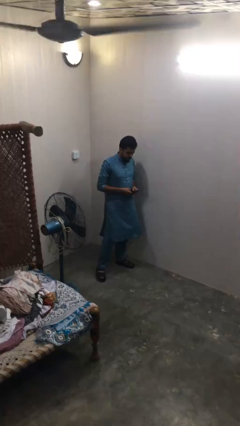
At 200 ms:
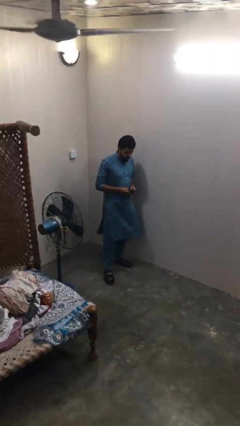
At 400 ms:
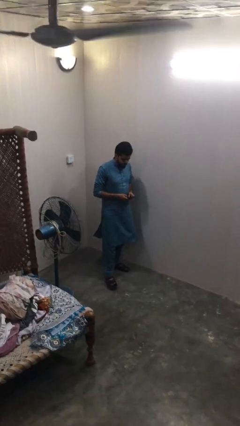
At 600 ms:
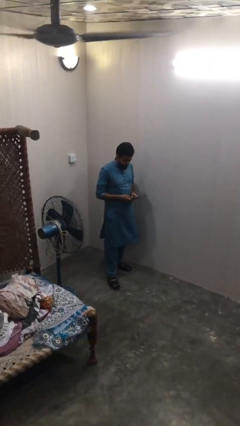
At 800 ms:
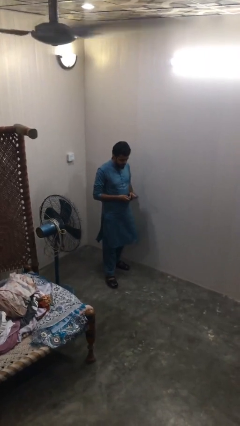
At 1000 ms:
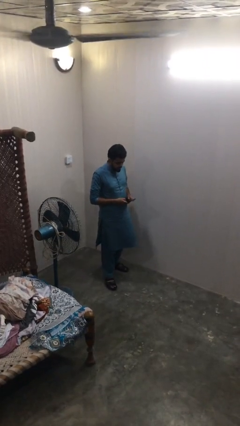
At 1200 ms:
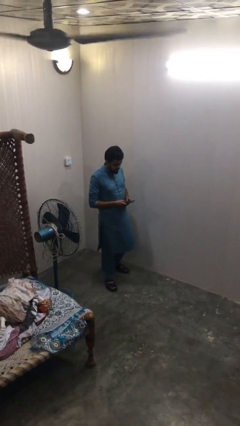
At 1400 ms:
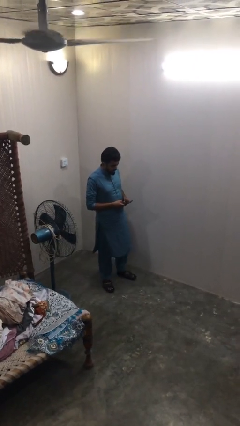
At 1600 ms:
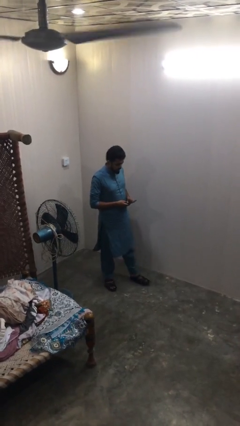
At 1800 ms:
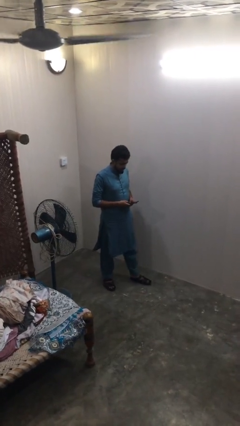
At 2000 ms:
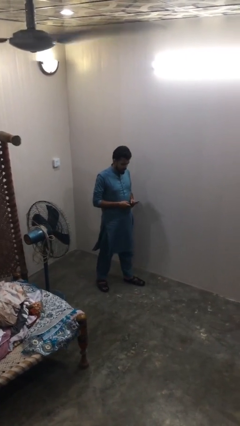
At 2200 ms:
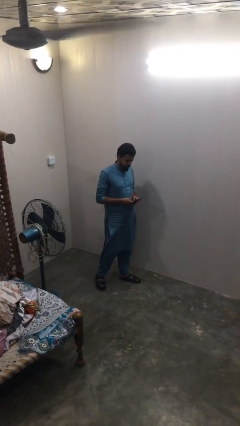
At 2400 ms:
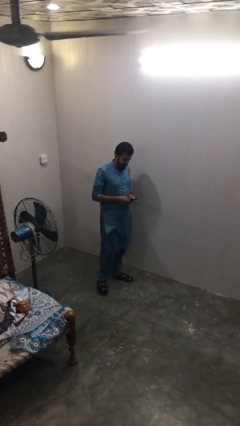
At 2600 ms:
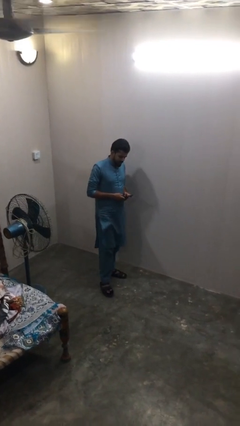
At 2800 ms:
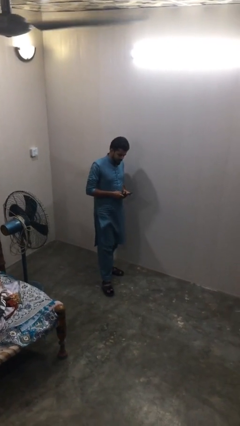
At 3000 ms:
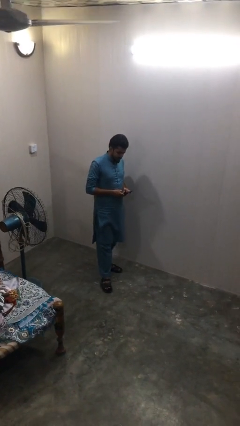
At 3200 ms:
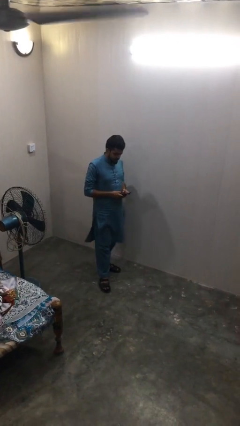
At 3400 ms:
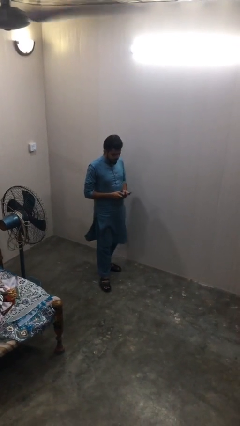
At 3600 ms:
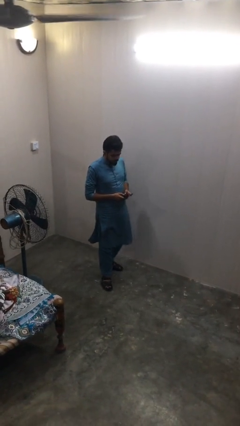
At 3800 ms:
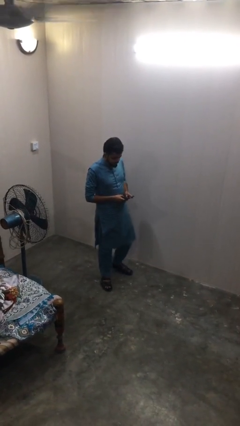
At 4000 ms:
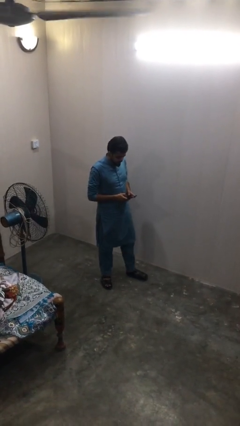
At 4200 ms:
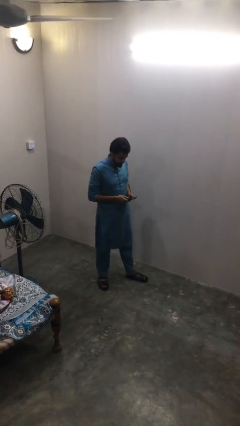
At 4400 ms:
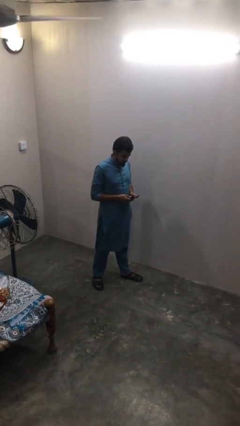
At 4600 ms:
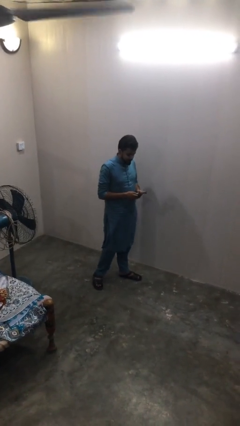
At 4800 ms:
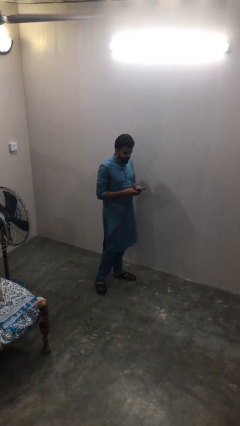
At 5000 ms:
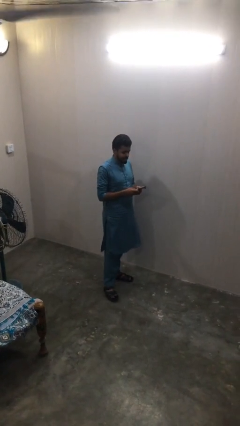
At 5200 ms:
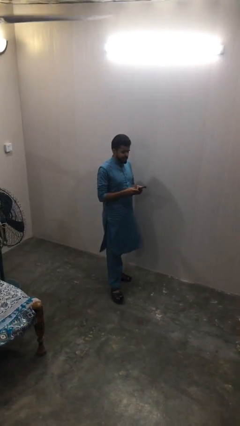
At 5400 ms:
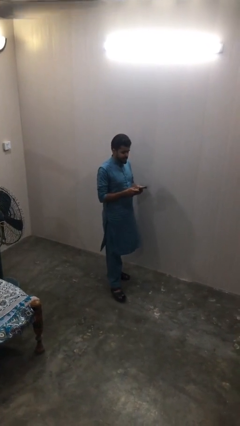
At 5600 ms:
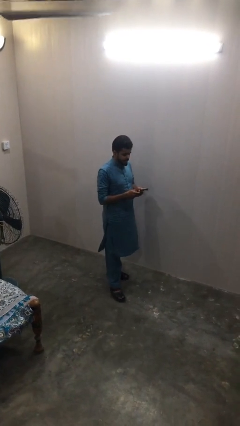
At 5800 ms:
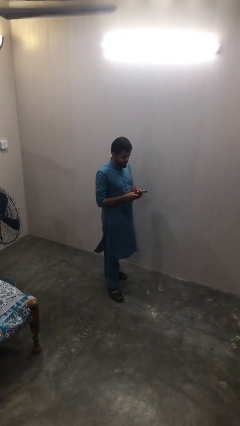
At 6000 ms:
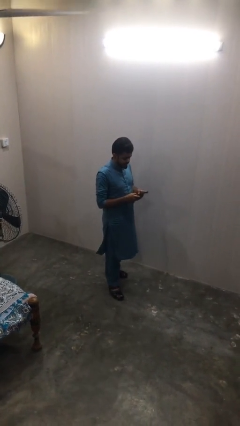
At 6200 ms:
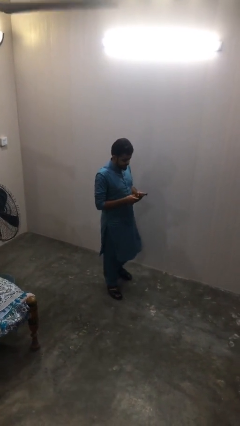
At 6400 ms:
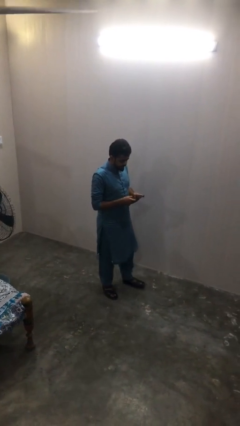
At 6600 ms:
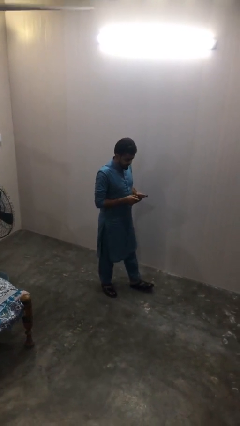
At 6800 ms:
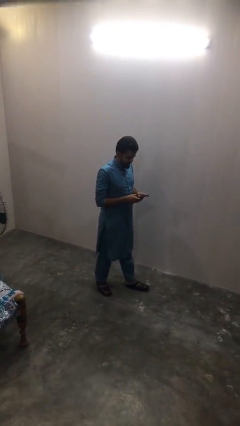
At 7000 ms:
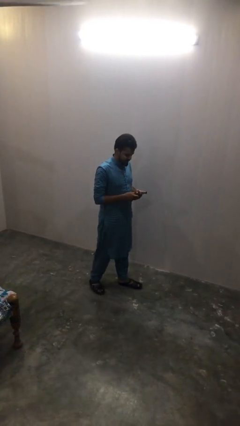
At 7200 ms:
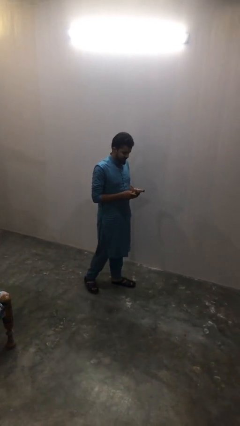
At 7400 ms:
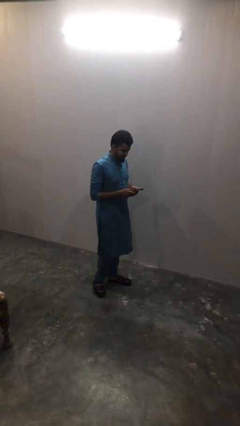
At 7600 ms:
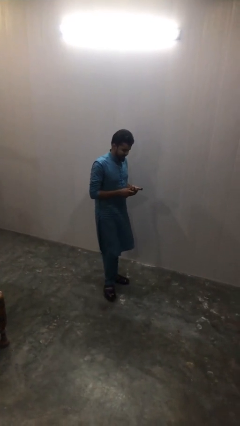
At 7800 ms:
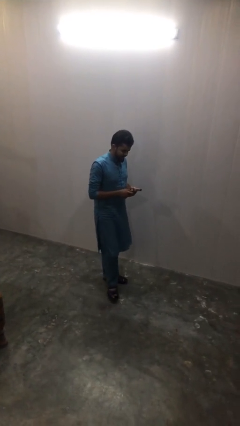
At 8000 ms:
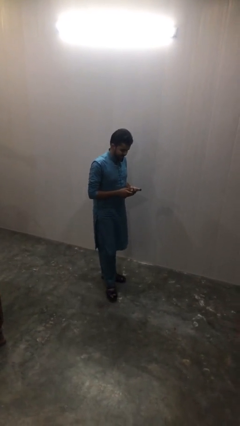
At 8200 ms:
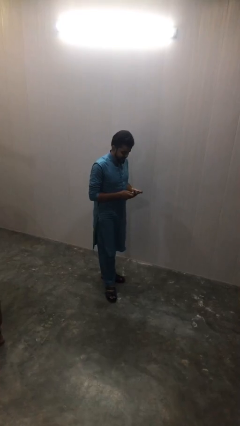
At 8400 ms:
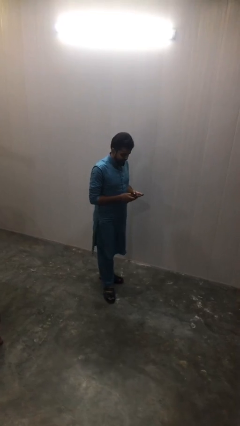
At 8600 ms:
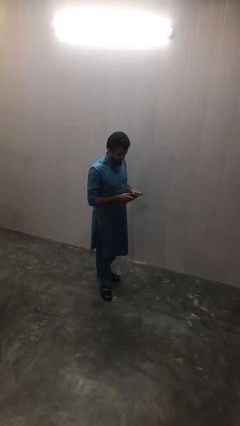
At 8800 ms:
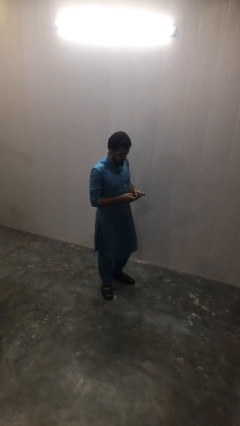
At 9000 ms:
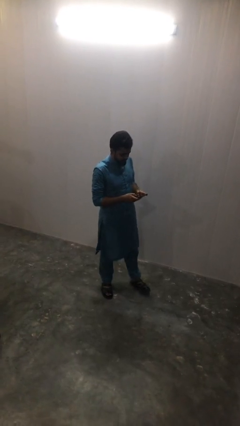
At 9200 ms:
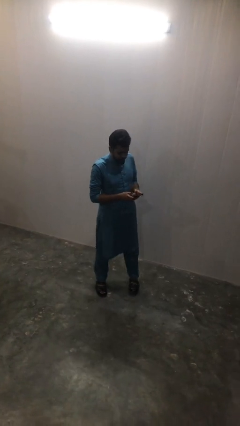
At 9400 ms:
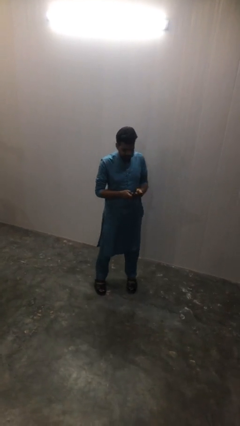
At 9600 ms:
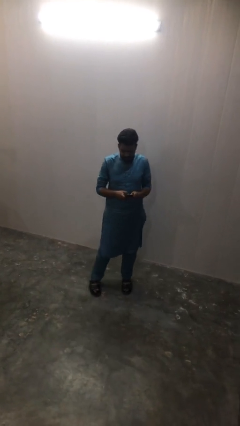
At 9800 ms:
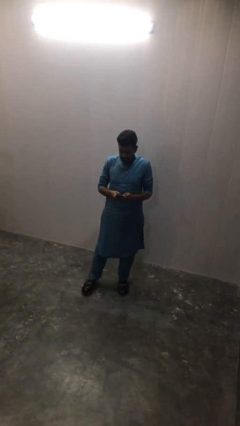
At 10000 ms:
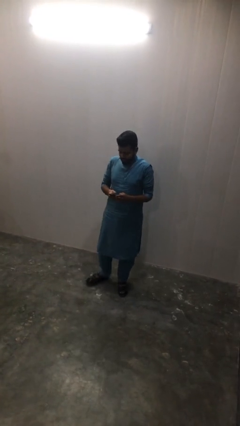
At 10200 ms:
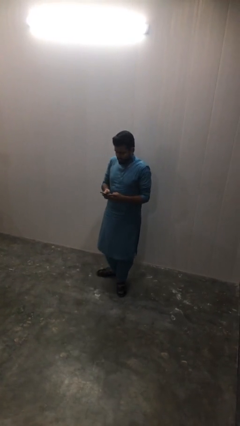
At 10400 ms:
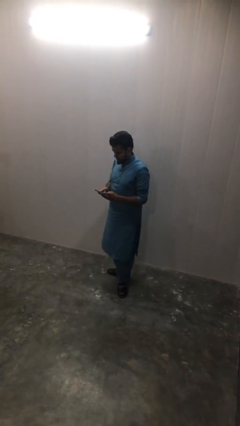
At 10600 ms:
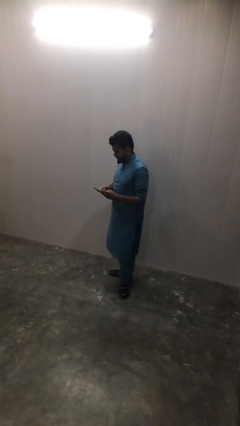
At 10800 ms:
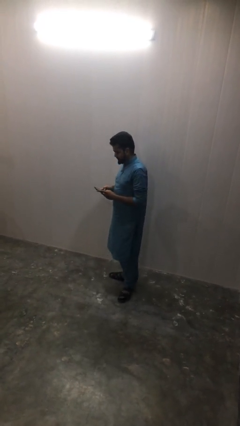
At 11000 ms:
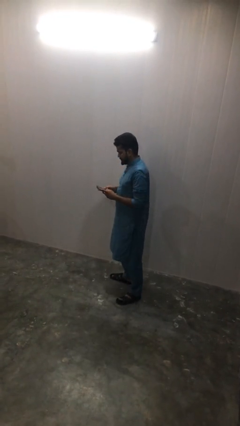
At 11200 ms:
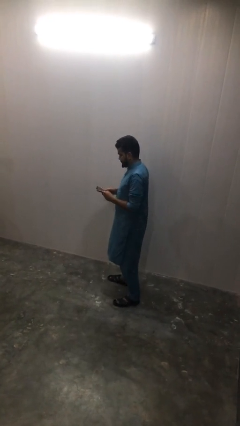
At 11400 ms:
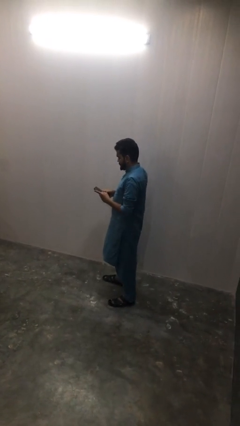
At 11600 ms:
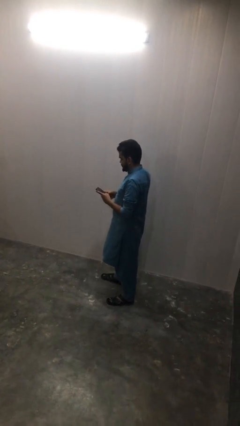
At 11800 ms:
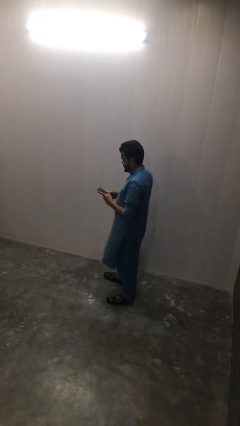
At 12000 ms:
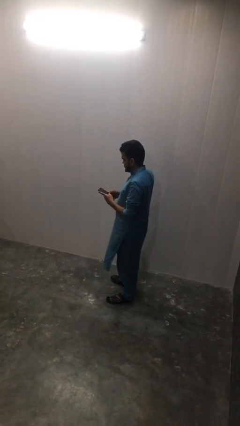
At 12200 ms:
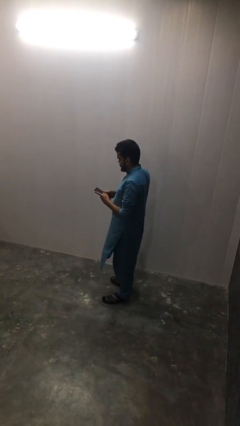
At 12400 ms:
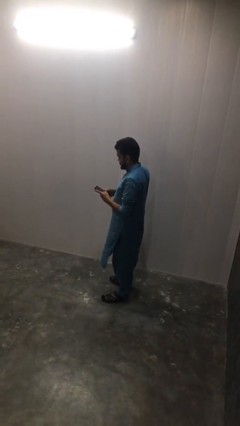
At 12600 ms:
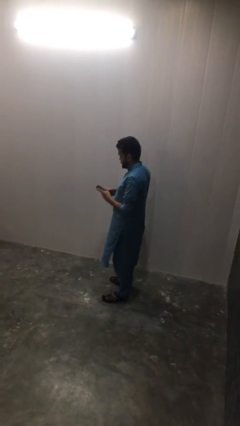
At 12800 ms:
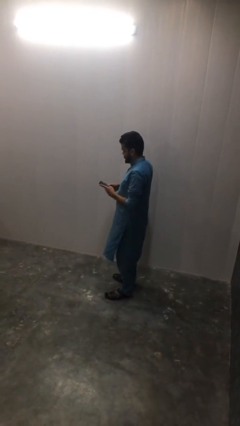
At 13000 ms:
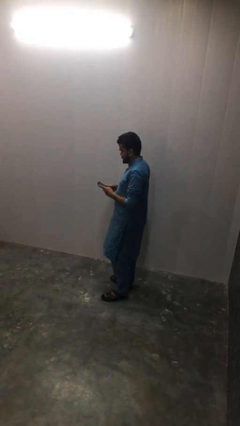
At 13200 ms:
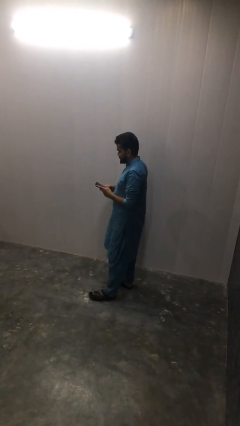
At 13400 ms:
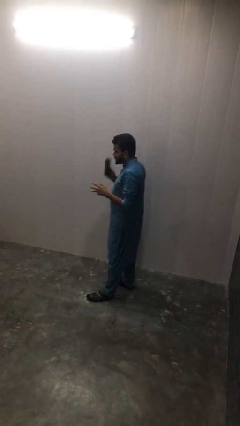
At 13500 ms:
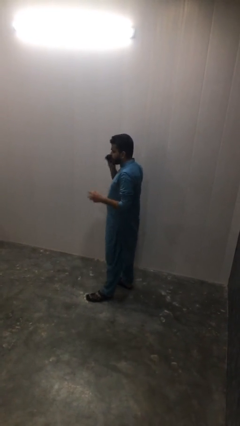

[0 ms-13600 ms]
person texts on phone

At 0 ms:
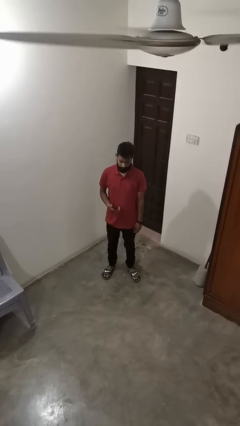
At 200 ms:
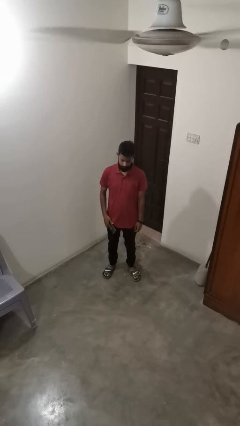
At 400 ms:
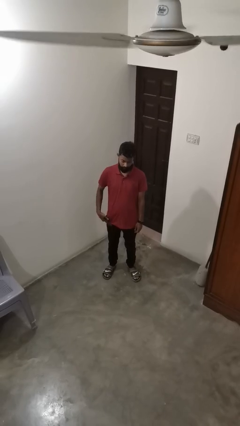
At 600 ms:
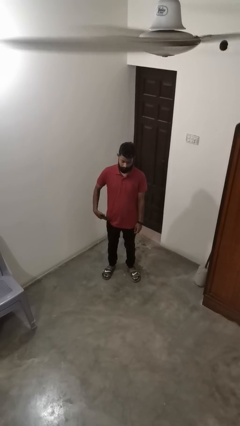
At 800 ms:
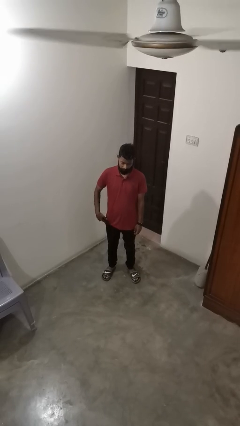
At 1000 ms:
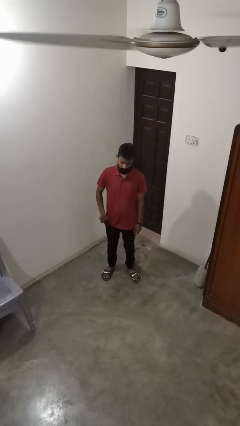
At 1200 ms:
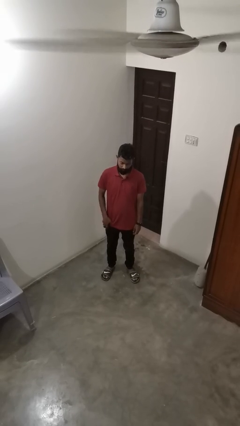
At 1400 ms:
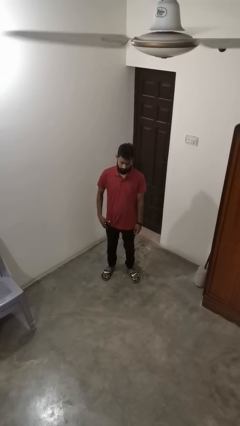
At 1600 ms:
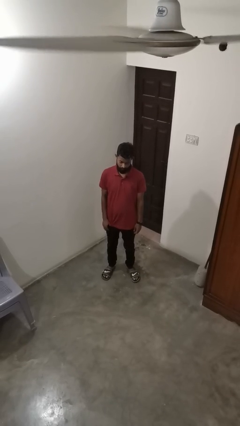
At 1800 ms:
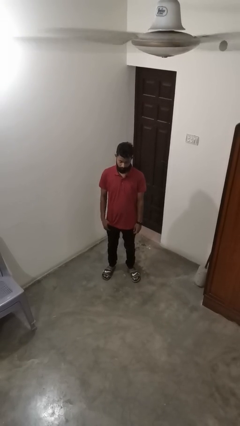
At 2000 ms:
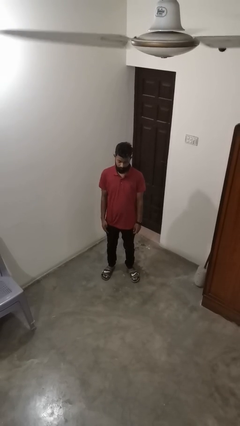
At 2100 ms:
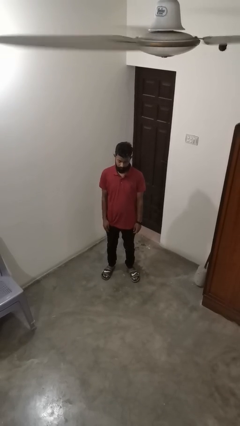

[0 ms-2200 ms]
person puts phone into pocket

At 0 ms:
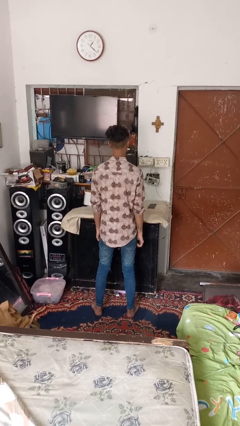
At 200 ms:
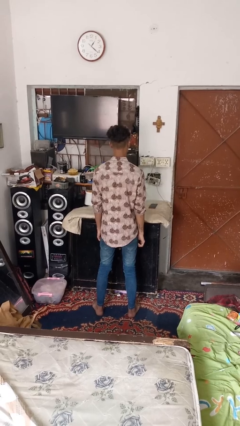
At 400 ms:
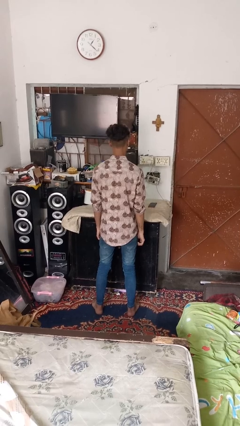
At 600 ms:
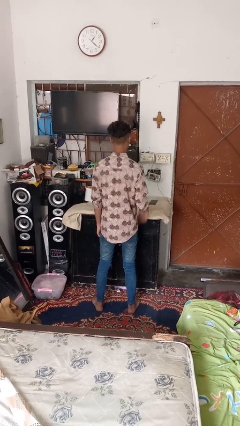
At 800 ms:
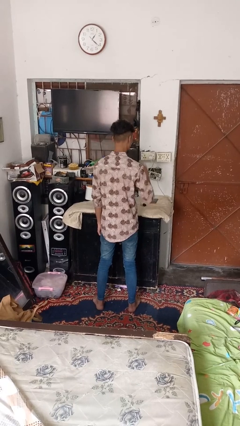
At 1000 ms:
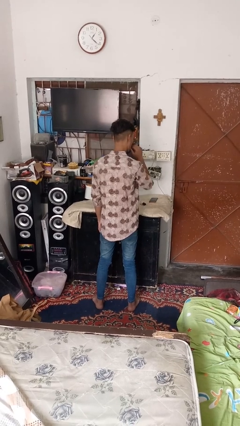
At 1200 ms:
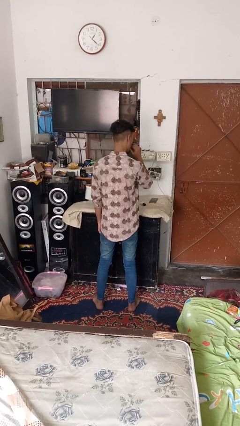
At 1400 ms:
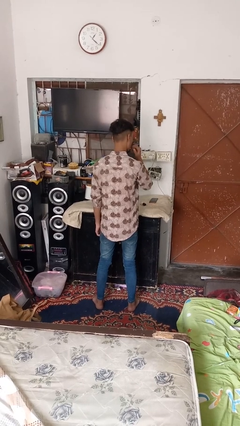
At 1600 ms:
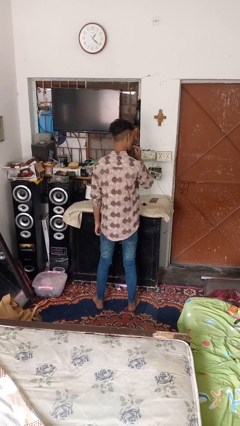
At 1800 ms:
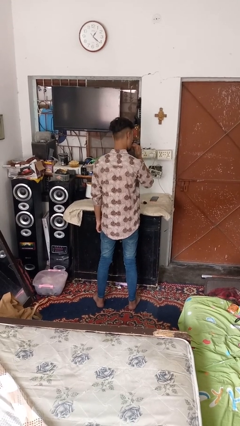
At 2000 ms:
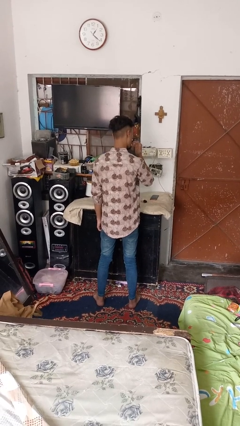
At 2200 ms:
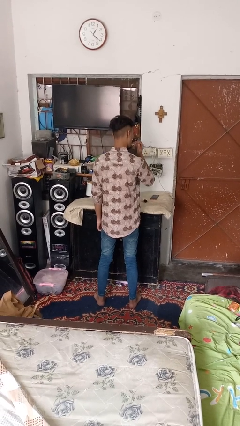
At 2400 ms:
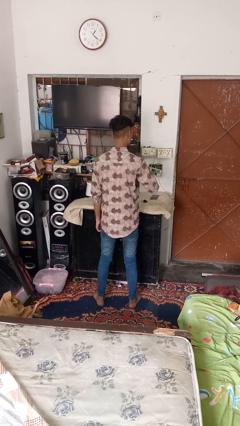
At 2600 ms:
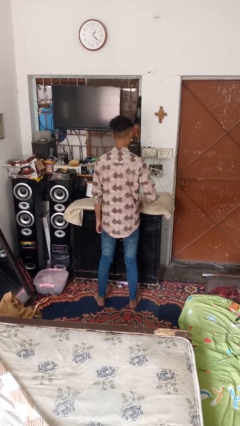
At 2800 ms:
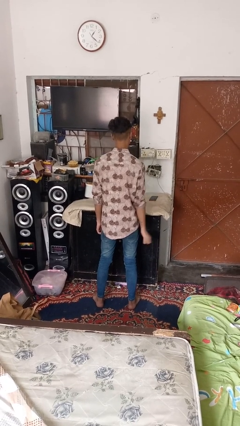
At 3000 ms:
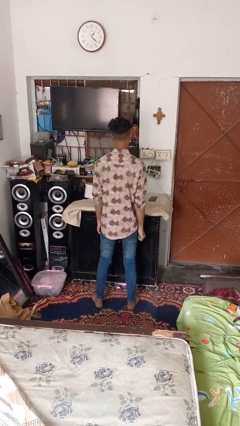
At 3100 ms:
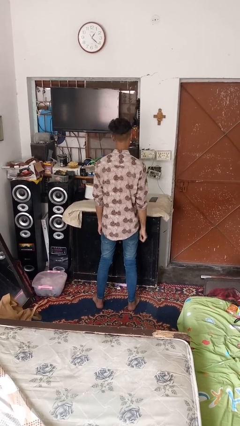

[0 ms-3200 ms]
person licks fingers
